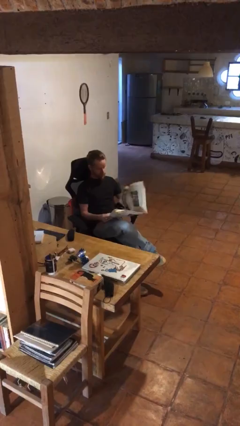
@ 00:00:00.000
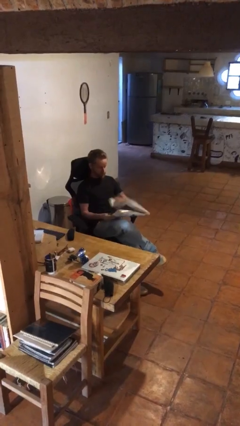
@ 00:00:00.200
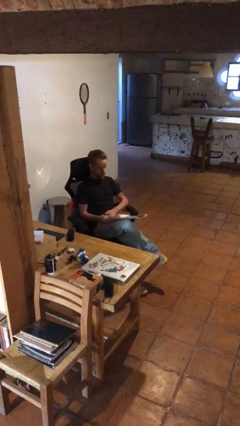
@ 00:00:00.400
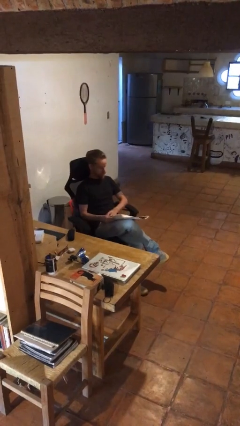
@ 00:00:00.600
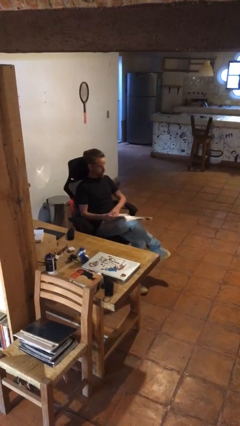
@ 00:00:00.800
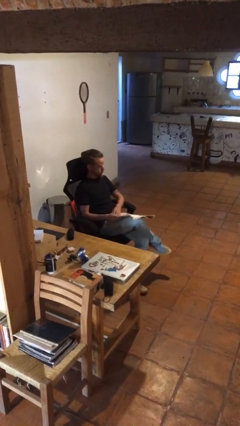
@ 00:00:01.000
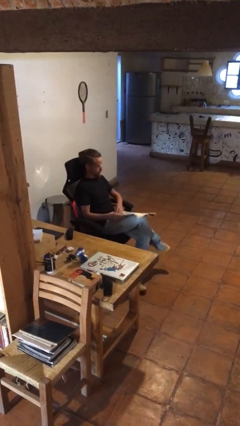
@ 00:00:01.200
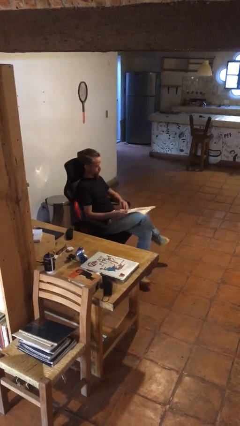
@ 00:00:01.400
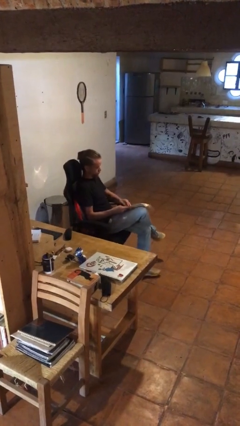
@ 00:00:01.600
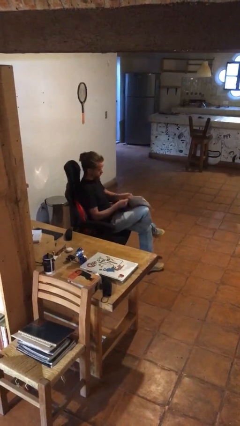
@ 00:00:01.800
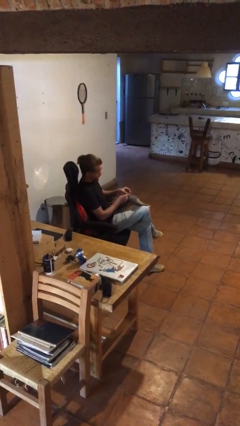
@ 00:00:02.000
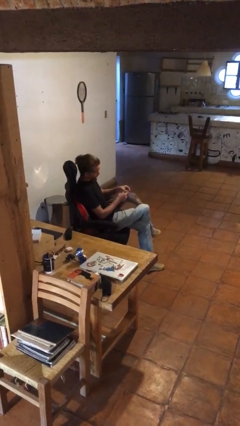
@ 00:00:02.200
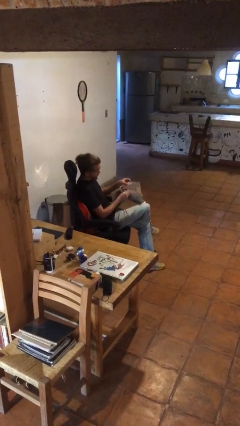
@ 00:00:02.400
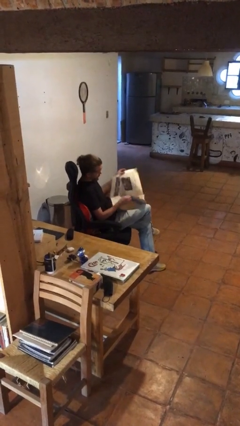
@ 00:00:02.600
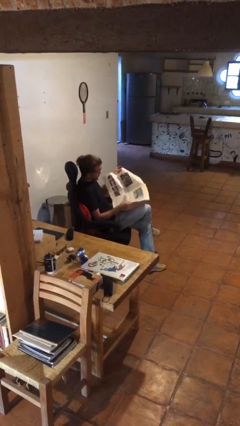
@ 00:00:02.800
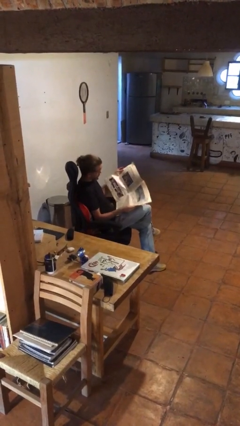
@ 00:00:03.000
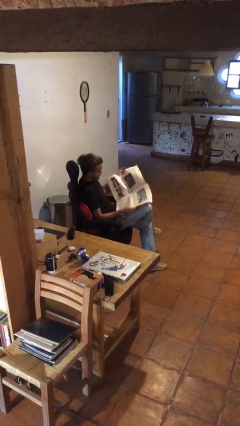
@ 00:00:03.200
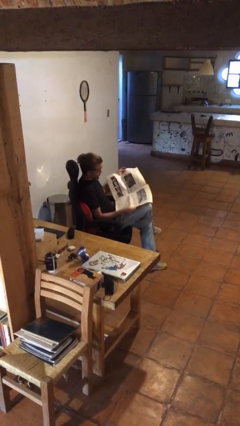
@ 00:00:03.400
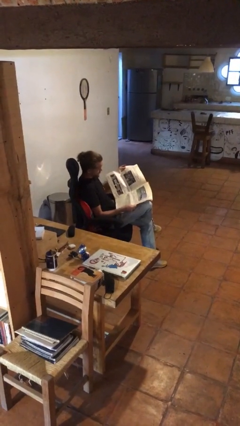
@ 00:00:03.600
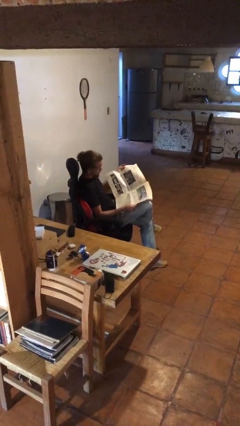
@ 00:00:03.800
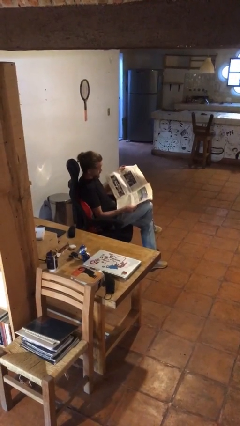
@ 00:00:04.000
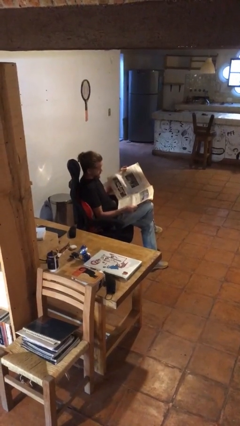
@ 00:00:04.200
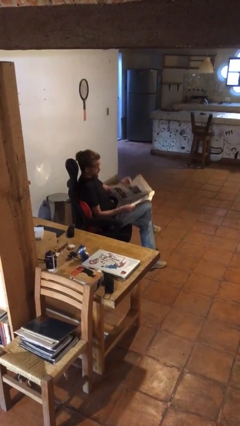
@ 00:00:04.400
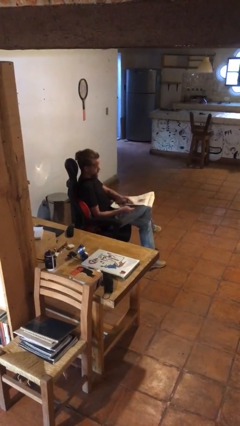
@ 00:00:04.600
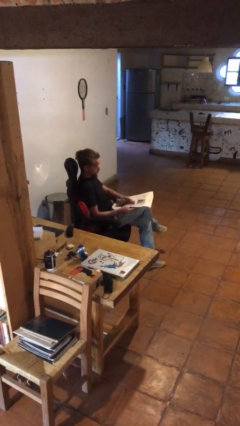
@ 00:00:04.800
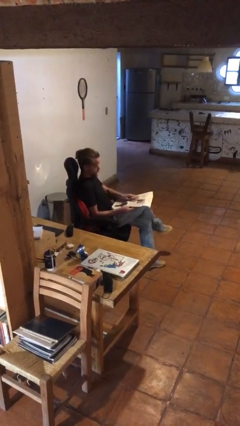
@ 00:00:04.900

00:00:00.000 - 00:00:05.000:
person reads newspaper

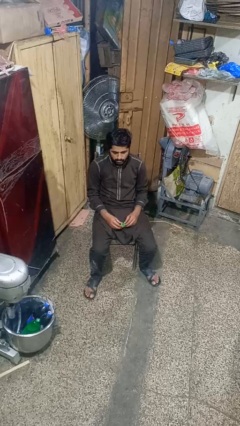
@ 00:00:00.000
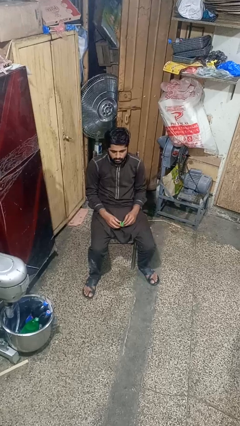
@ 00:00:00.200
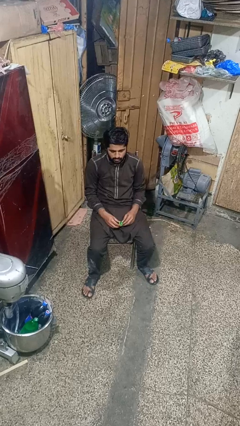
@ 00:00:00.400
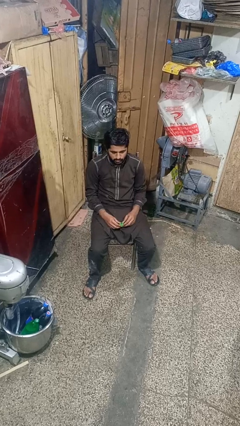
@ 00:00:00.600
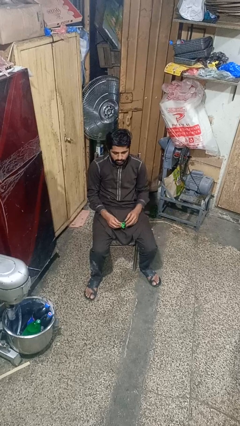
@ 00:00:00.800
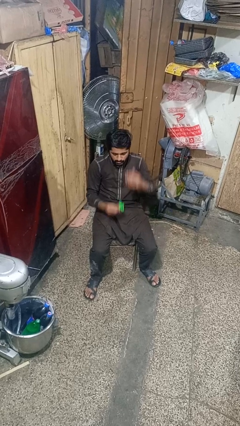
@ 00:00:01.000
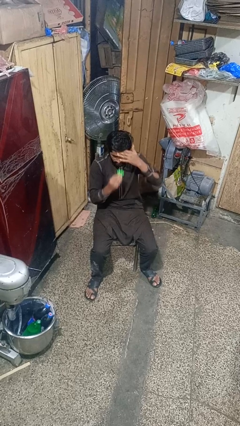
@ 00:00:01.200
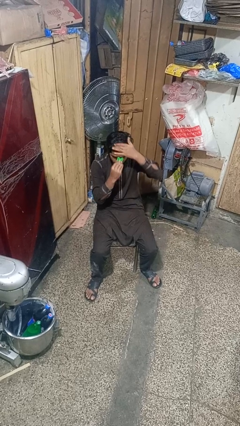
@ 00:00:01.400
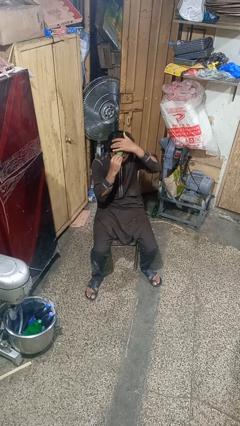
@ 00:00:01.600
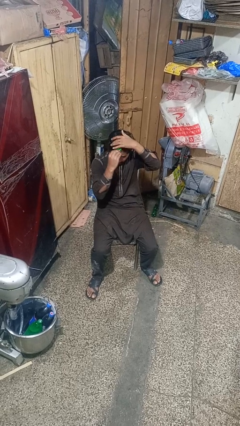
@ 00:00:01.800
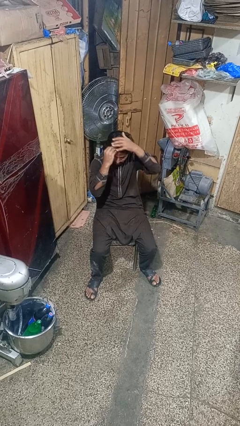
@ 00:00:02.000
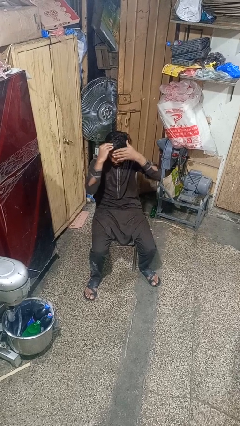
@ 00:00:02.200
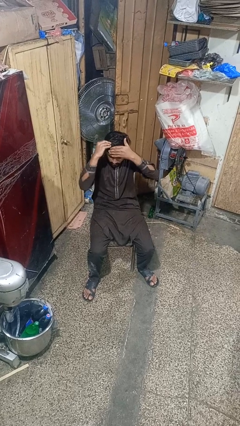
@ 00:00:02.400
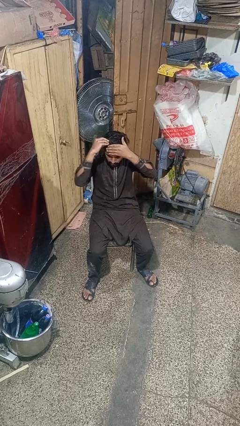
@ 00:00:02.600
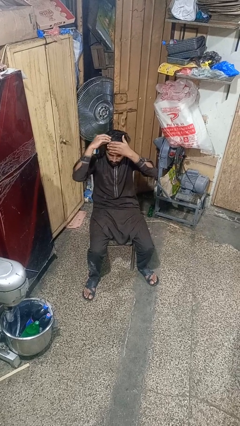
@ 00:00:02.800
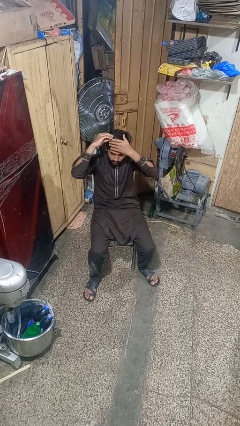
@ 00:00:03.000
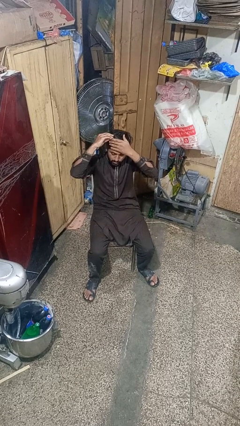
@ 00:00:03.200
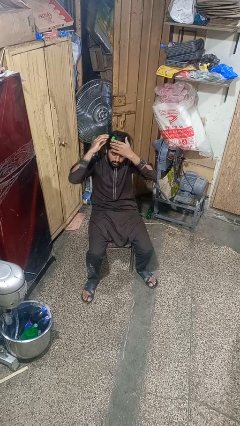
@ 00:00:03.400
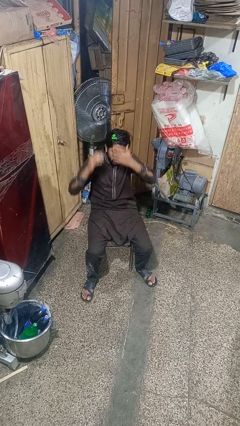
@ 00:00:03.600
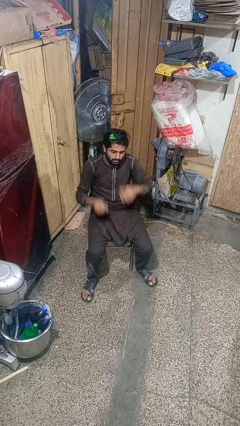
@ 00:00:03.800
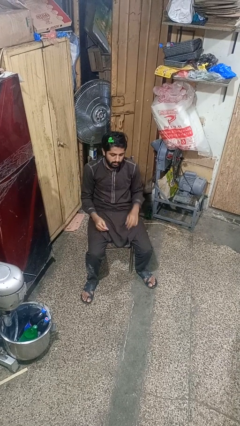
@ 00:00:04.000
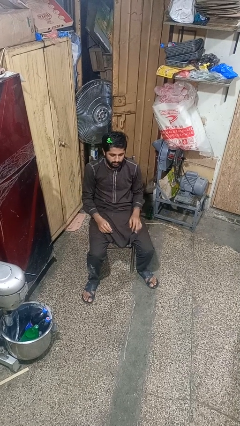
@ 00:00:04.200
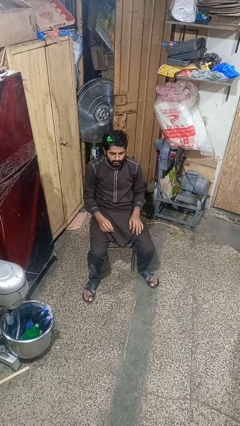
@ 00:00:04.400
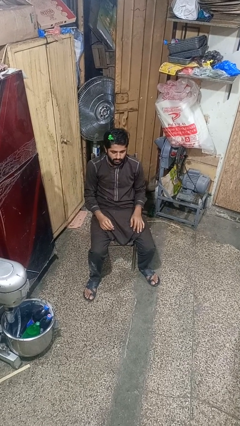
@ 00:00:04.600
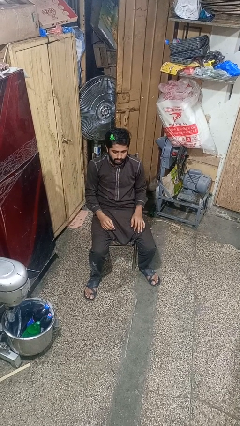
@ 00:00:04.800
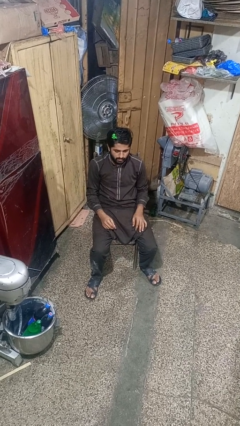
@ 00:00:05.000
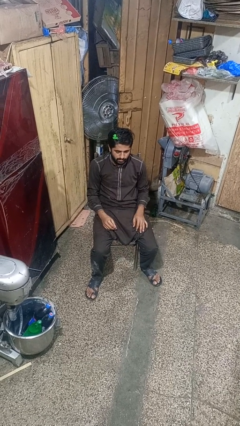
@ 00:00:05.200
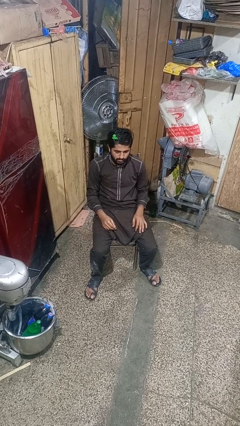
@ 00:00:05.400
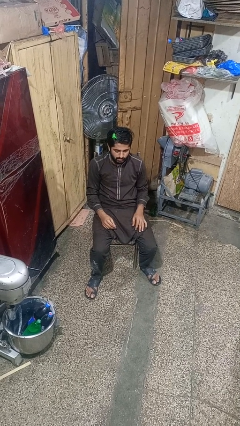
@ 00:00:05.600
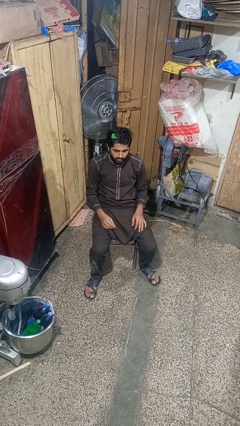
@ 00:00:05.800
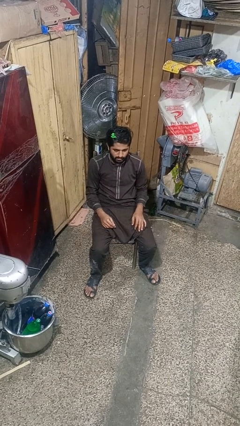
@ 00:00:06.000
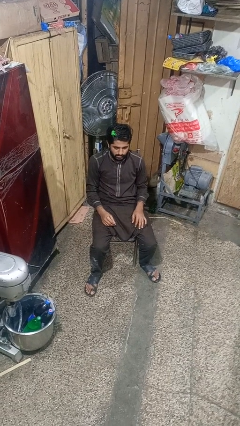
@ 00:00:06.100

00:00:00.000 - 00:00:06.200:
person puts hair in ponytail

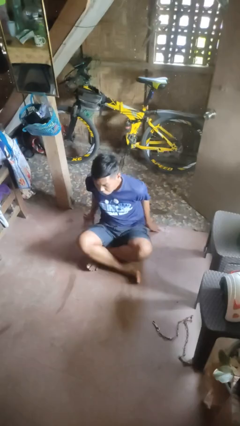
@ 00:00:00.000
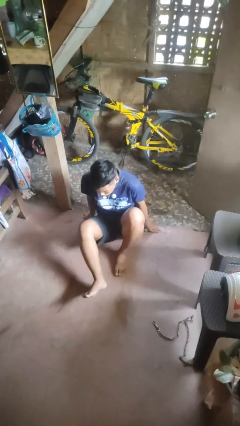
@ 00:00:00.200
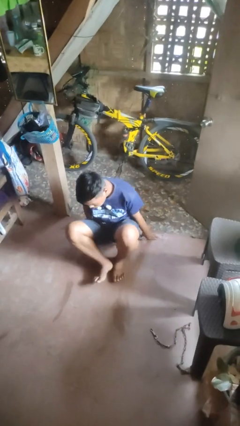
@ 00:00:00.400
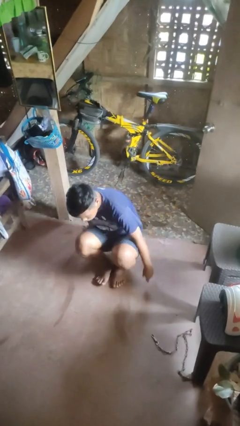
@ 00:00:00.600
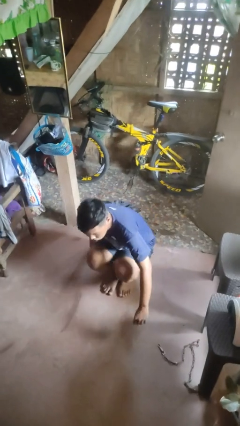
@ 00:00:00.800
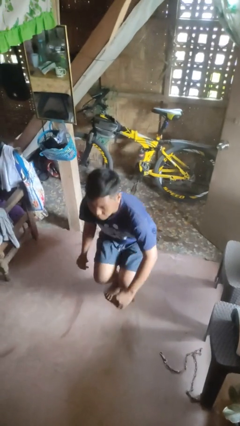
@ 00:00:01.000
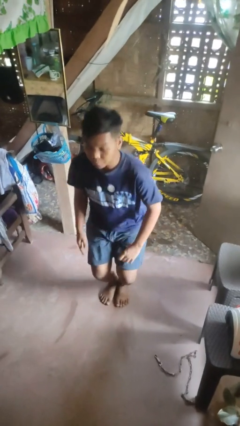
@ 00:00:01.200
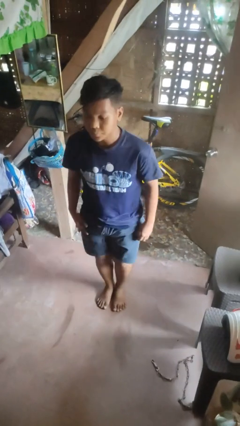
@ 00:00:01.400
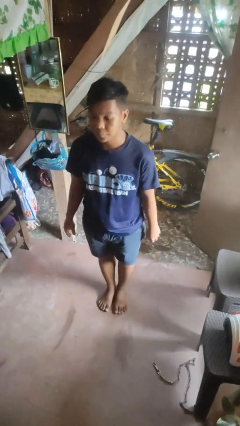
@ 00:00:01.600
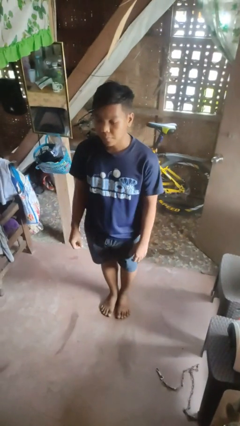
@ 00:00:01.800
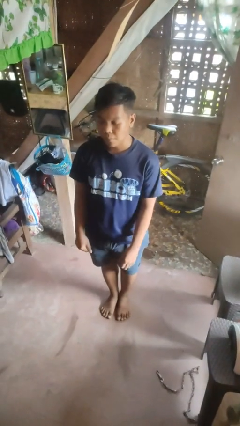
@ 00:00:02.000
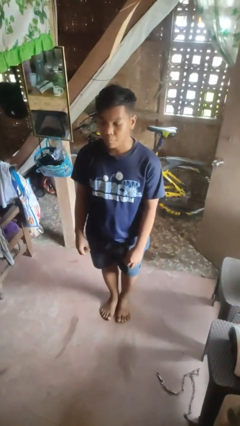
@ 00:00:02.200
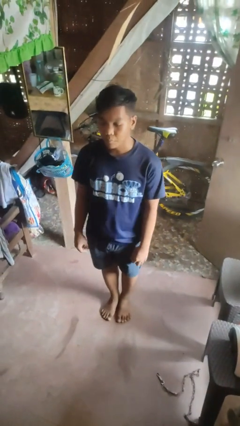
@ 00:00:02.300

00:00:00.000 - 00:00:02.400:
person stands up from floor

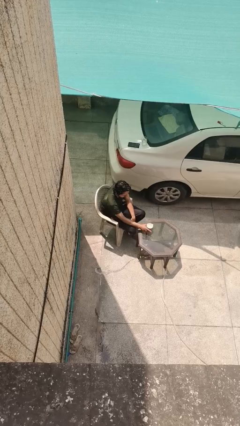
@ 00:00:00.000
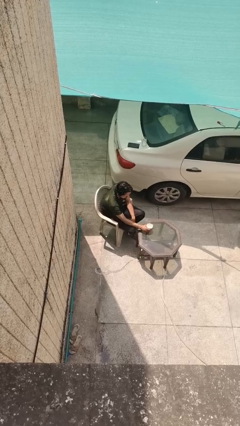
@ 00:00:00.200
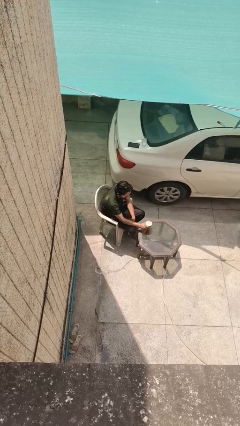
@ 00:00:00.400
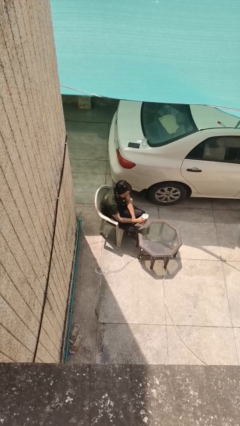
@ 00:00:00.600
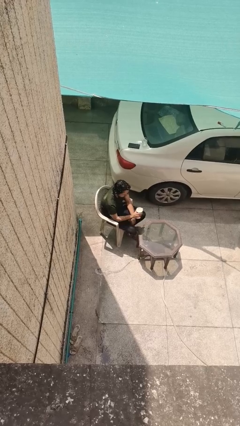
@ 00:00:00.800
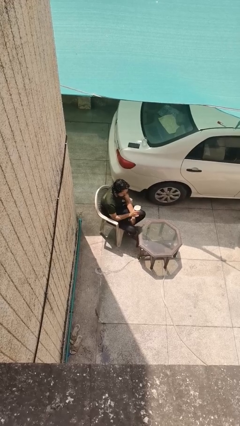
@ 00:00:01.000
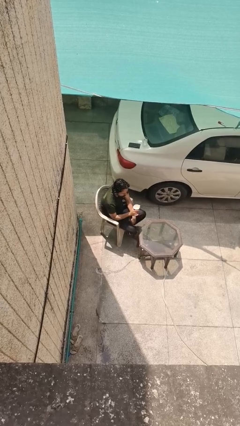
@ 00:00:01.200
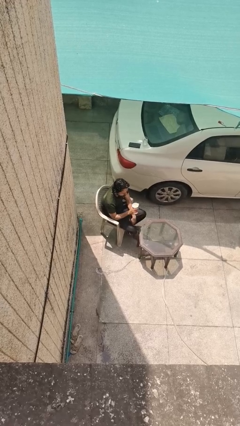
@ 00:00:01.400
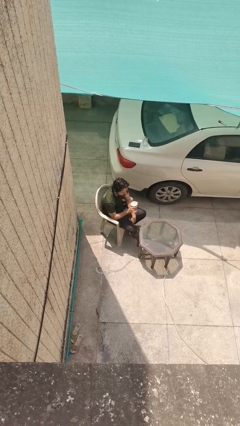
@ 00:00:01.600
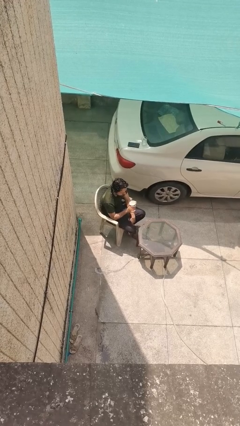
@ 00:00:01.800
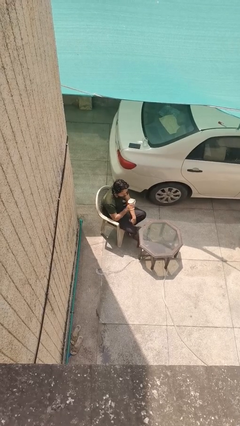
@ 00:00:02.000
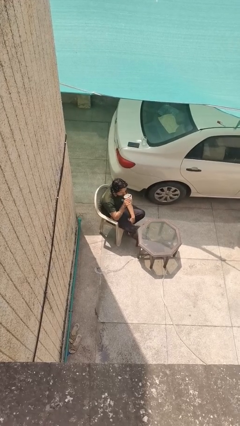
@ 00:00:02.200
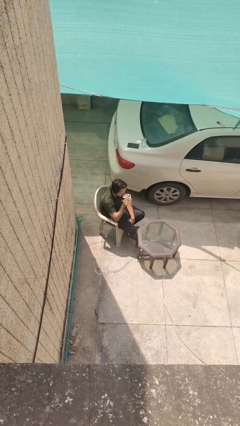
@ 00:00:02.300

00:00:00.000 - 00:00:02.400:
person picks up object from table

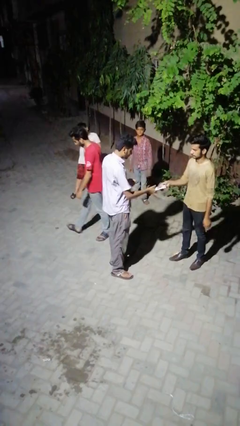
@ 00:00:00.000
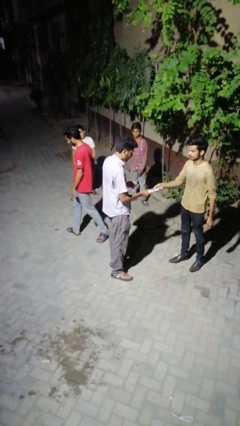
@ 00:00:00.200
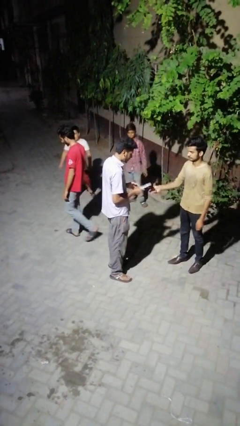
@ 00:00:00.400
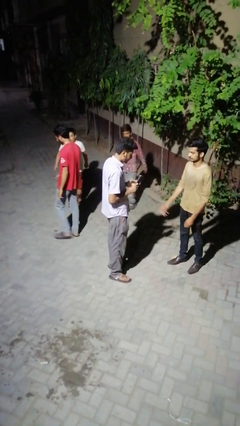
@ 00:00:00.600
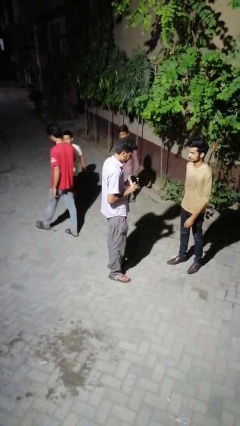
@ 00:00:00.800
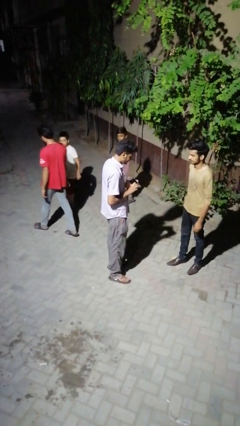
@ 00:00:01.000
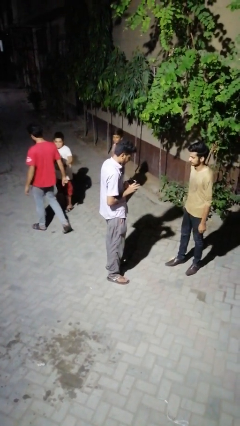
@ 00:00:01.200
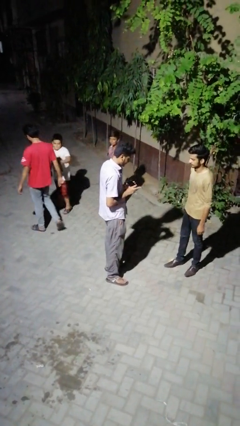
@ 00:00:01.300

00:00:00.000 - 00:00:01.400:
person transfers object to person
